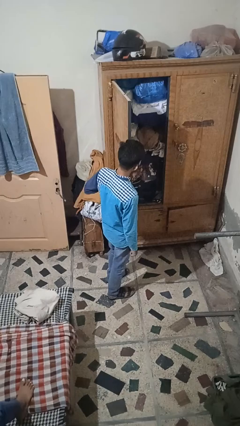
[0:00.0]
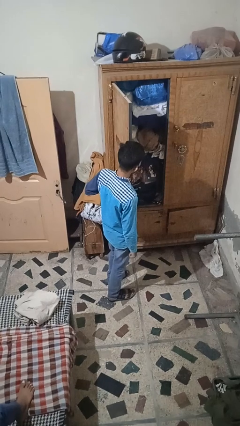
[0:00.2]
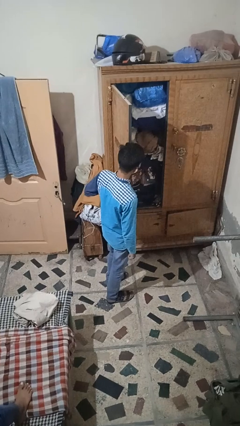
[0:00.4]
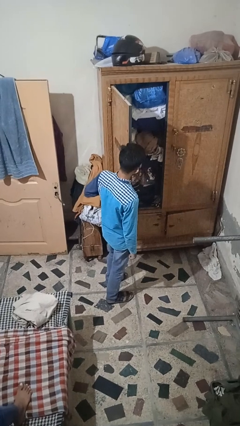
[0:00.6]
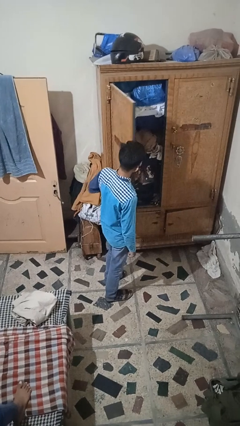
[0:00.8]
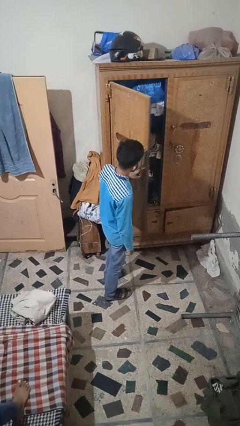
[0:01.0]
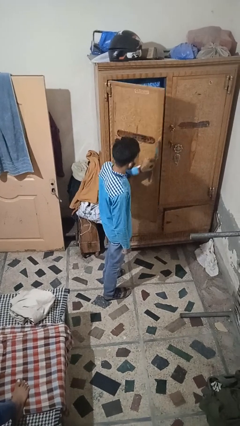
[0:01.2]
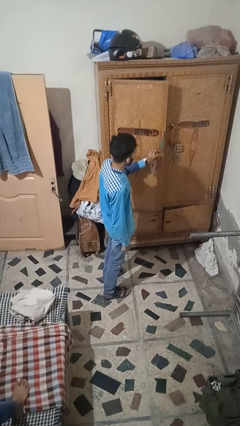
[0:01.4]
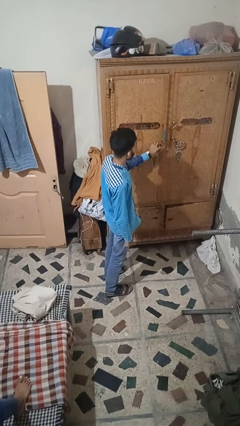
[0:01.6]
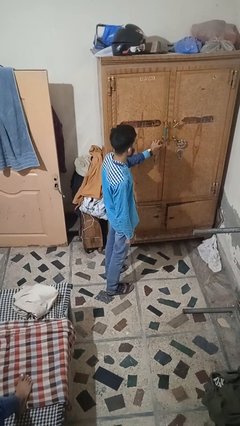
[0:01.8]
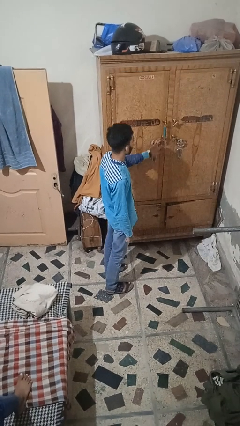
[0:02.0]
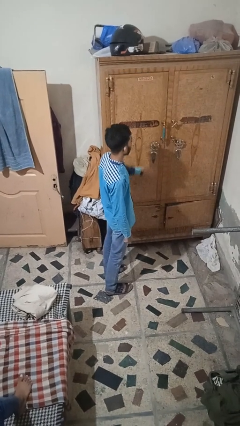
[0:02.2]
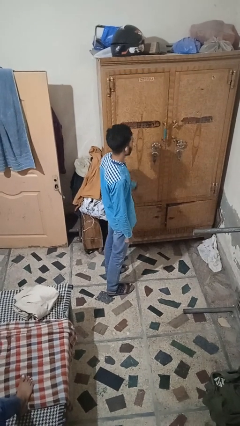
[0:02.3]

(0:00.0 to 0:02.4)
person closes closet door

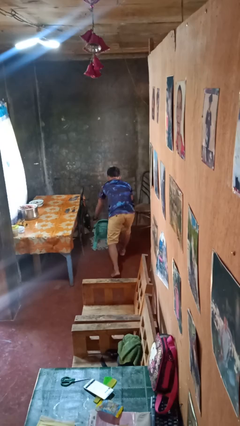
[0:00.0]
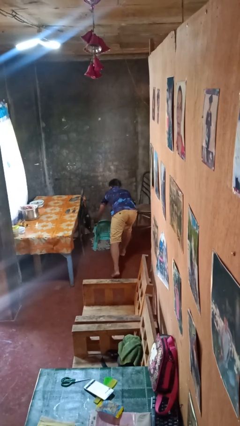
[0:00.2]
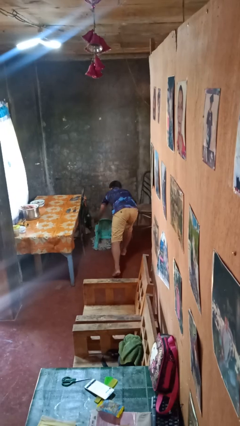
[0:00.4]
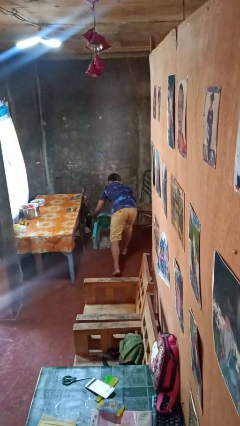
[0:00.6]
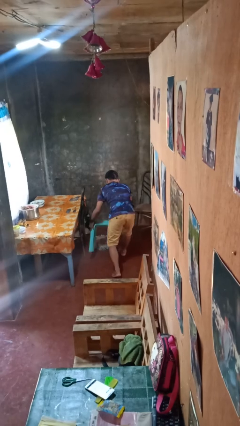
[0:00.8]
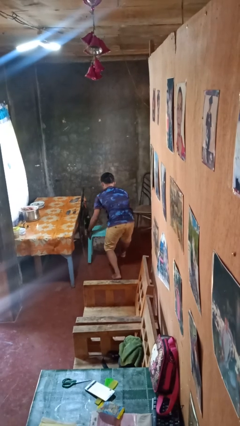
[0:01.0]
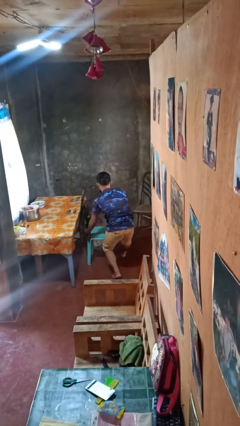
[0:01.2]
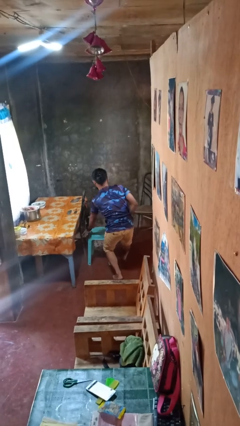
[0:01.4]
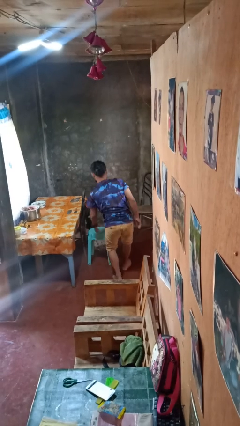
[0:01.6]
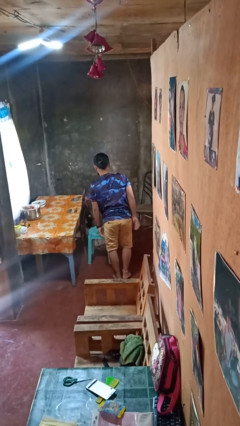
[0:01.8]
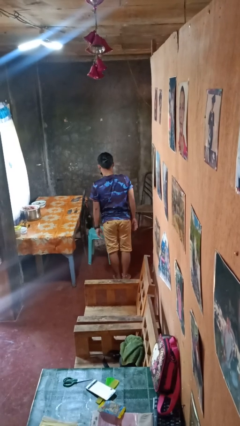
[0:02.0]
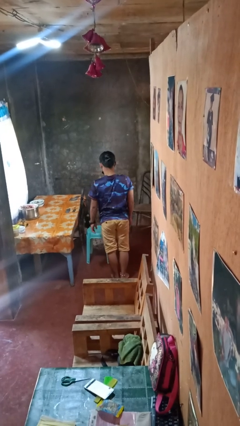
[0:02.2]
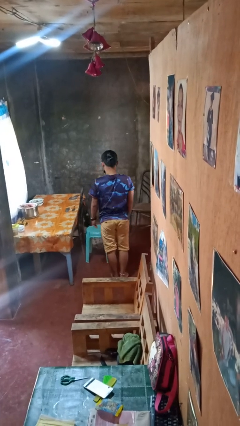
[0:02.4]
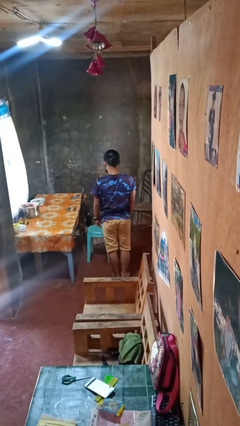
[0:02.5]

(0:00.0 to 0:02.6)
person sets upright furniture

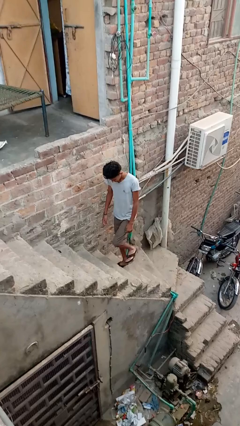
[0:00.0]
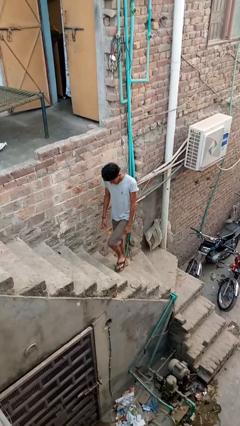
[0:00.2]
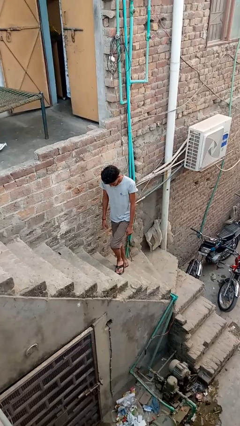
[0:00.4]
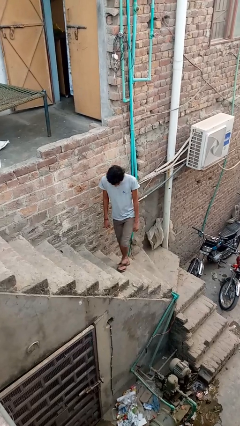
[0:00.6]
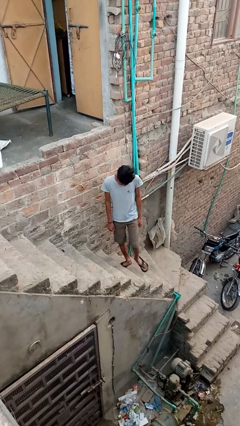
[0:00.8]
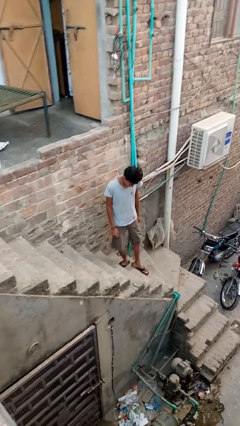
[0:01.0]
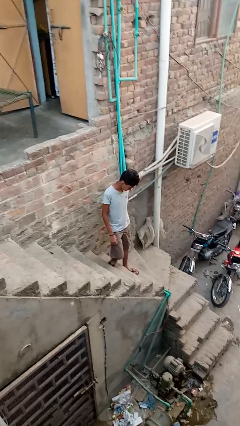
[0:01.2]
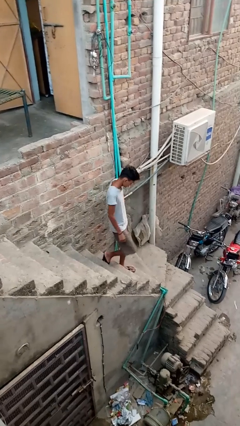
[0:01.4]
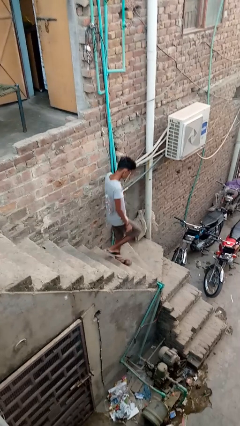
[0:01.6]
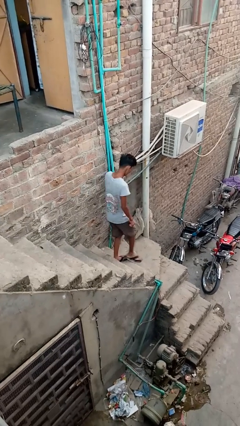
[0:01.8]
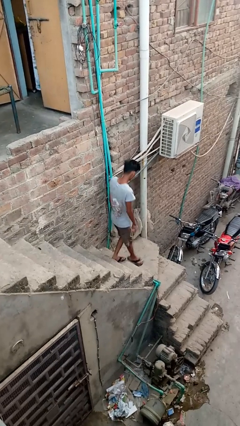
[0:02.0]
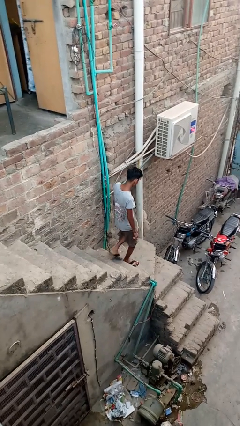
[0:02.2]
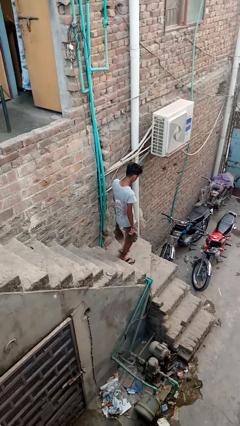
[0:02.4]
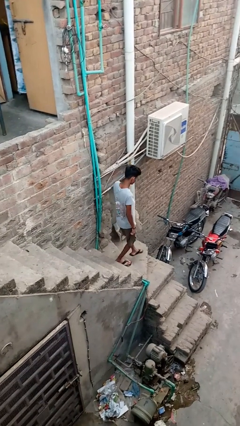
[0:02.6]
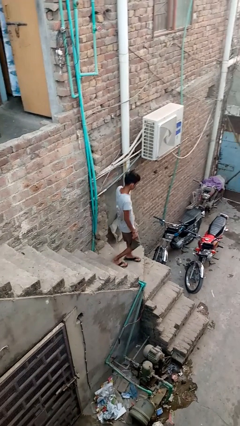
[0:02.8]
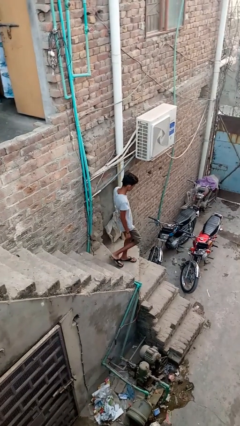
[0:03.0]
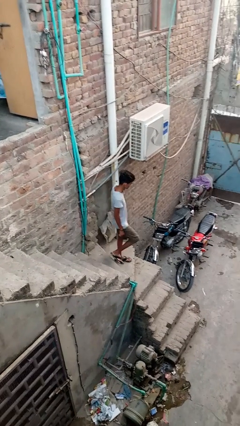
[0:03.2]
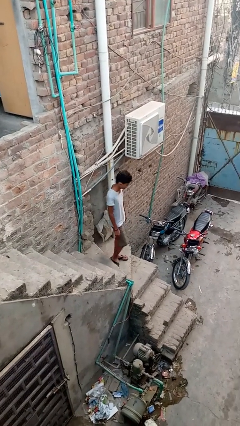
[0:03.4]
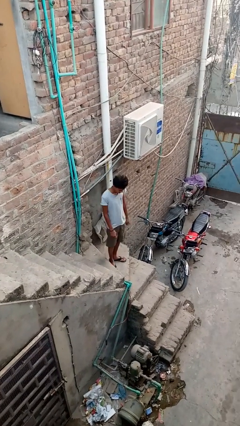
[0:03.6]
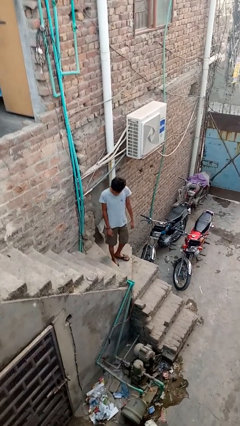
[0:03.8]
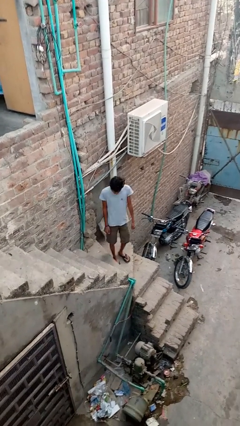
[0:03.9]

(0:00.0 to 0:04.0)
person climbs down stairs

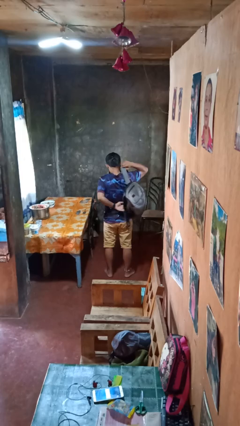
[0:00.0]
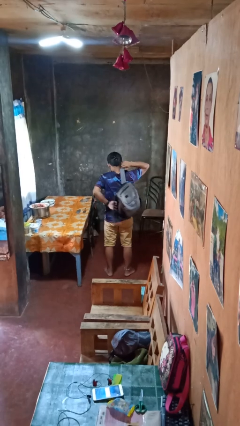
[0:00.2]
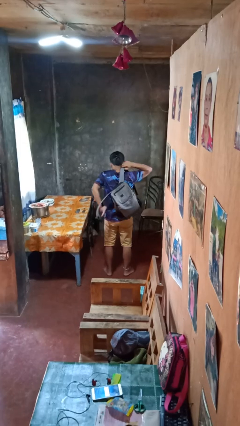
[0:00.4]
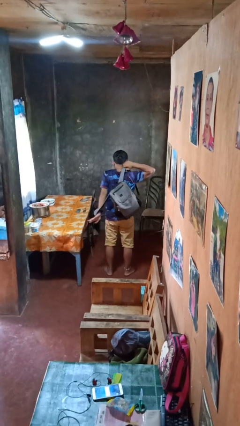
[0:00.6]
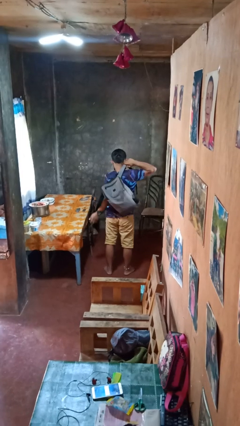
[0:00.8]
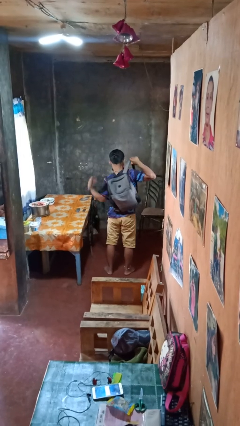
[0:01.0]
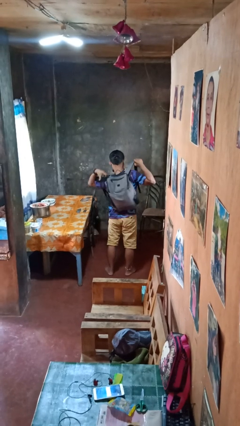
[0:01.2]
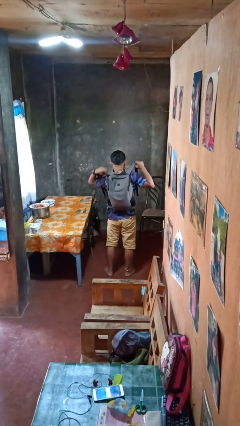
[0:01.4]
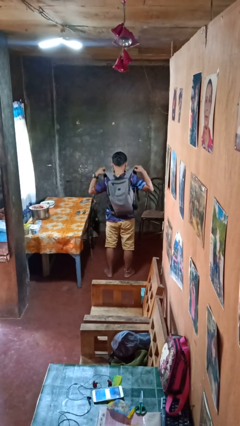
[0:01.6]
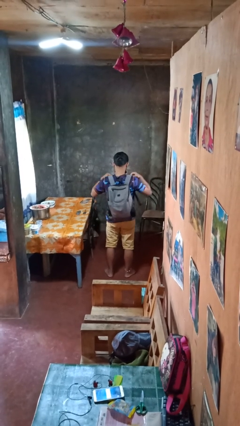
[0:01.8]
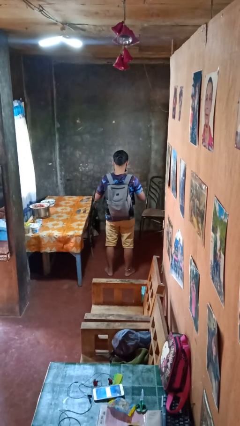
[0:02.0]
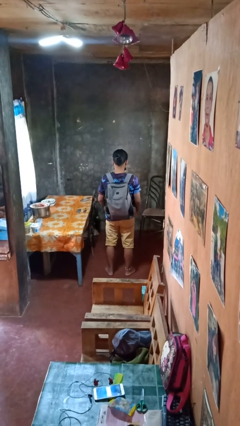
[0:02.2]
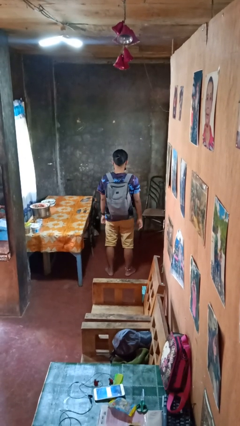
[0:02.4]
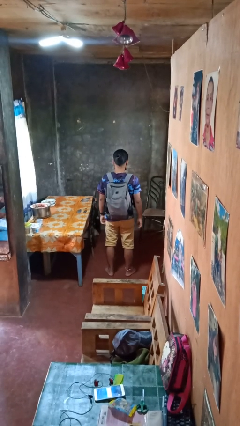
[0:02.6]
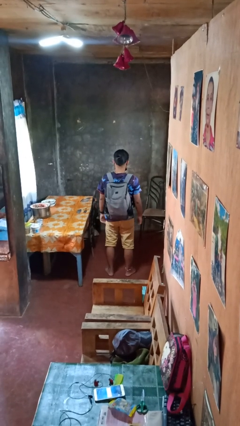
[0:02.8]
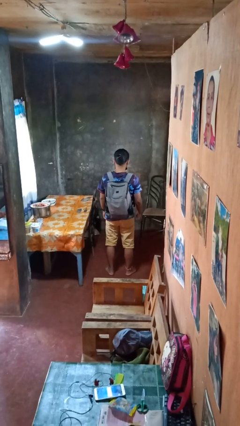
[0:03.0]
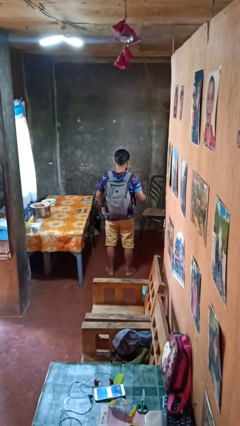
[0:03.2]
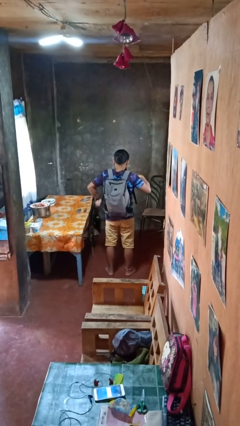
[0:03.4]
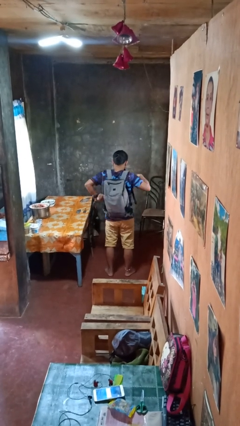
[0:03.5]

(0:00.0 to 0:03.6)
person puts on backpack

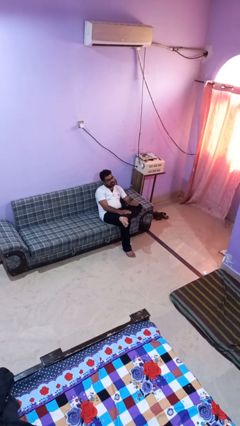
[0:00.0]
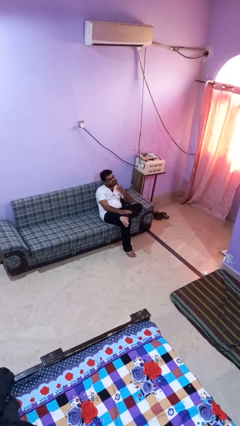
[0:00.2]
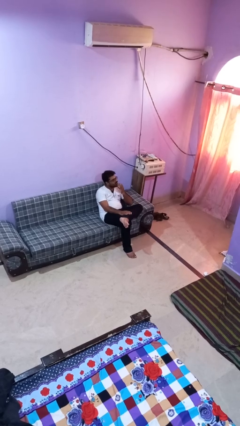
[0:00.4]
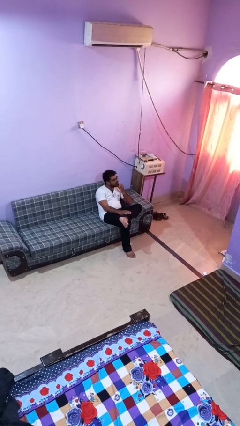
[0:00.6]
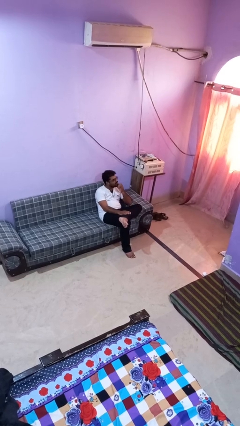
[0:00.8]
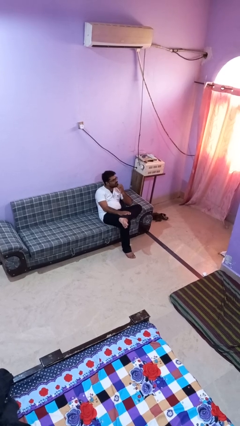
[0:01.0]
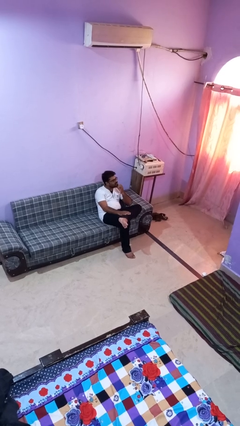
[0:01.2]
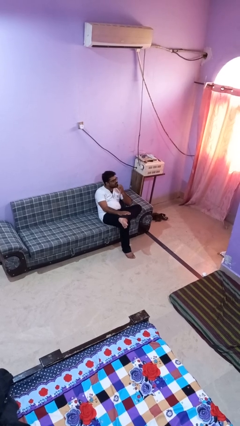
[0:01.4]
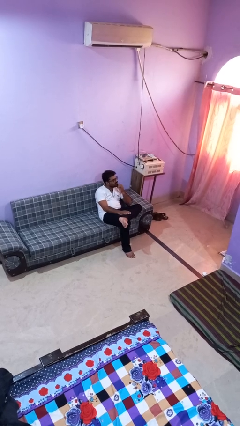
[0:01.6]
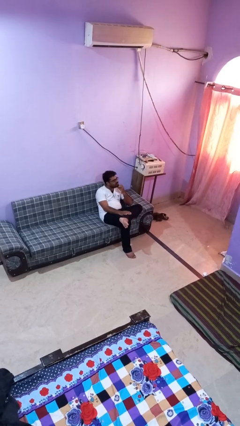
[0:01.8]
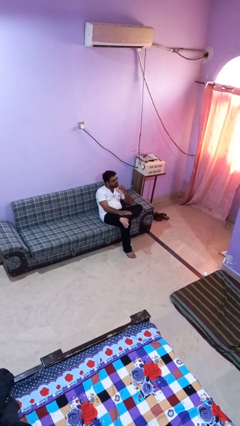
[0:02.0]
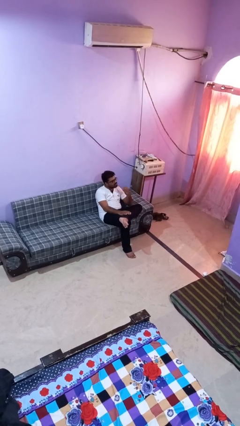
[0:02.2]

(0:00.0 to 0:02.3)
person strokes chin

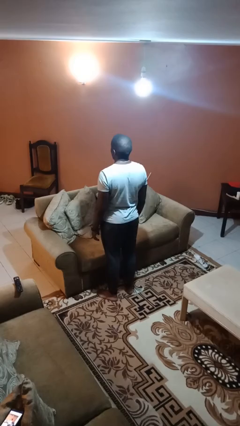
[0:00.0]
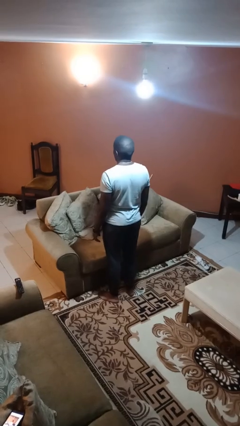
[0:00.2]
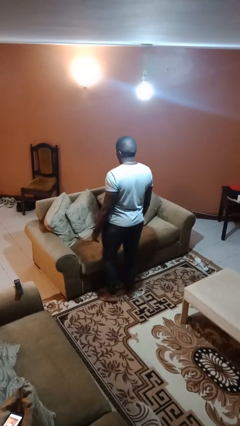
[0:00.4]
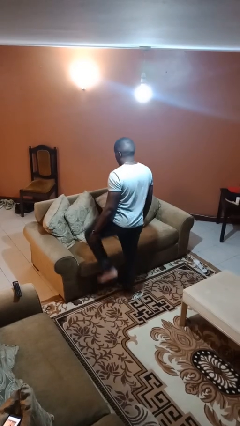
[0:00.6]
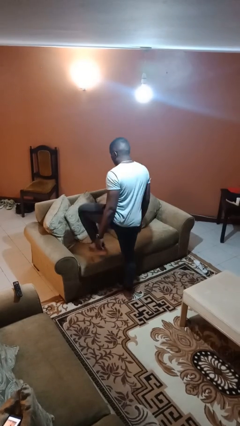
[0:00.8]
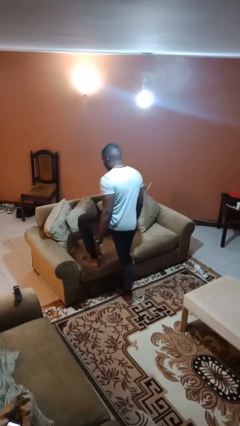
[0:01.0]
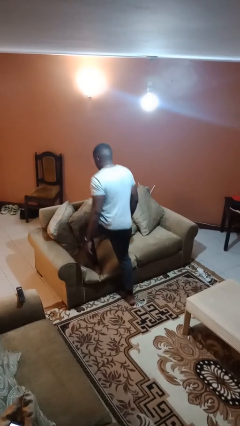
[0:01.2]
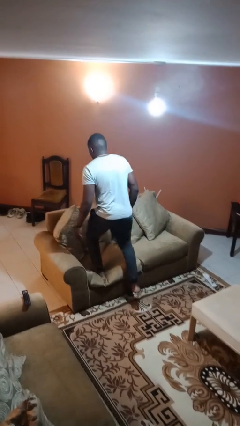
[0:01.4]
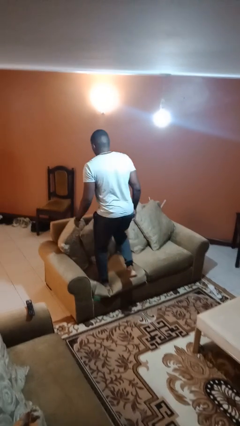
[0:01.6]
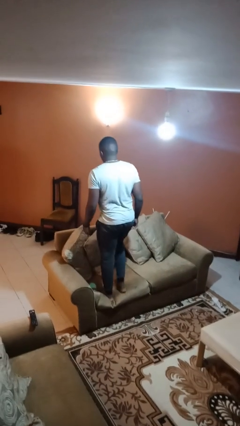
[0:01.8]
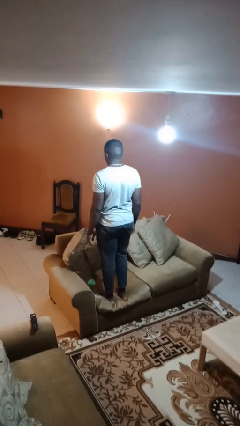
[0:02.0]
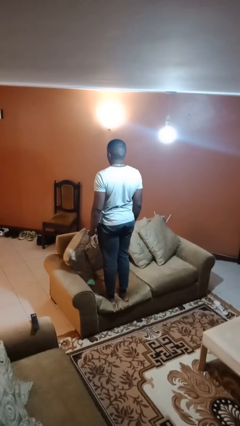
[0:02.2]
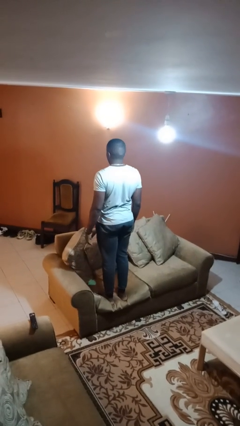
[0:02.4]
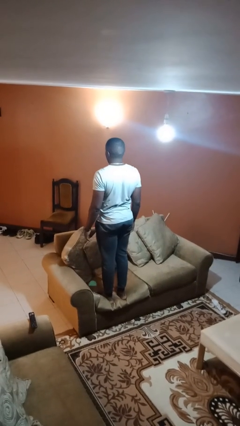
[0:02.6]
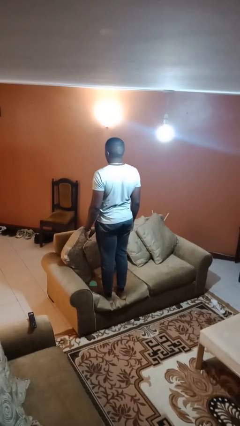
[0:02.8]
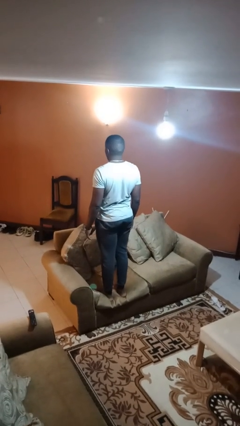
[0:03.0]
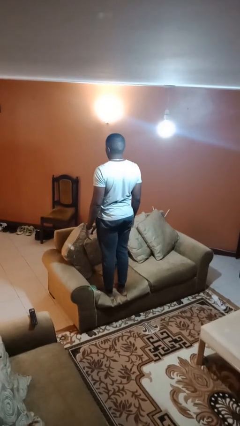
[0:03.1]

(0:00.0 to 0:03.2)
person climbs on couch
